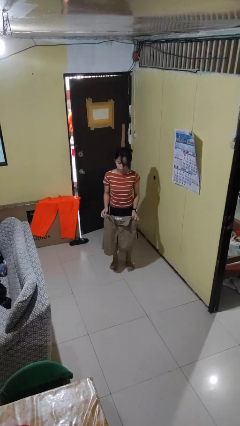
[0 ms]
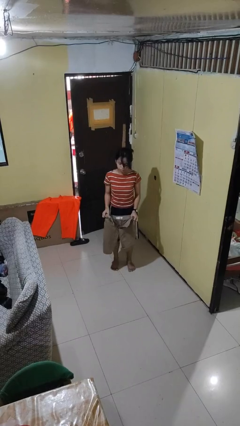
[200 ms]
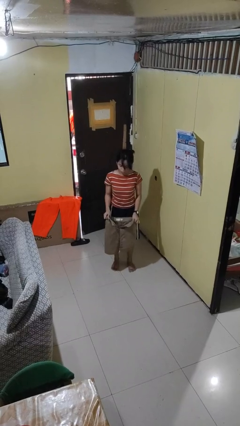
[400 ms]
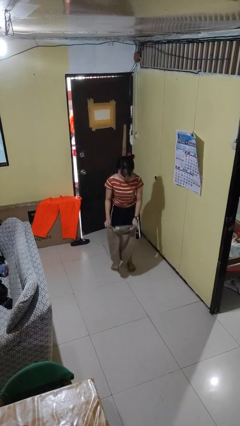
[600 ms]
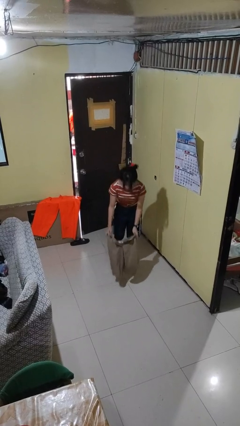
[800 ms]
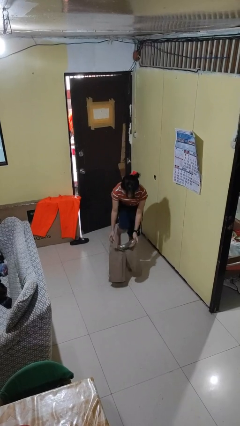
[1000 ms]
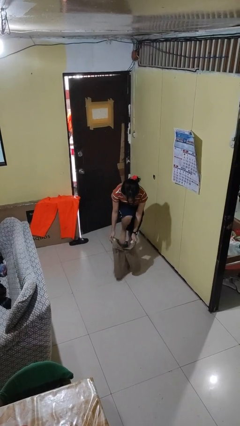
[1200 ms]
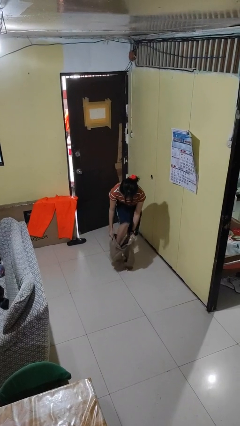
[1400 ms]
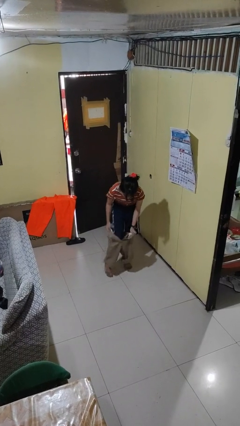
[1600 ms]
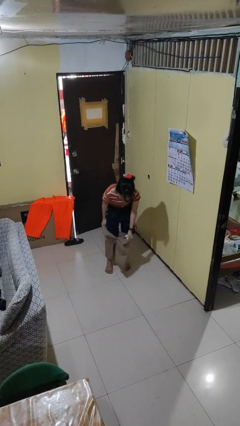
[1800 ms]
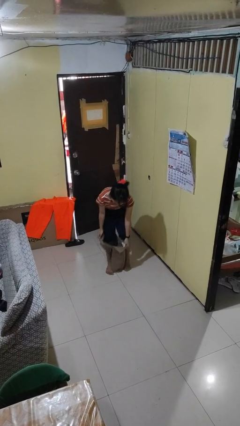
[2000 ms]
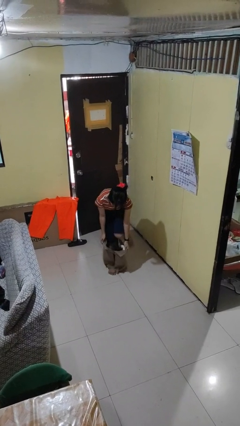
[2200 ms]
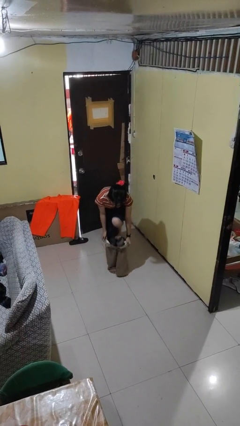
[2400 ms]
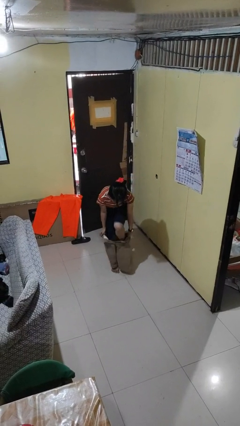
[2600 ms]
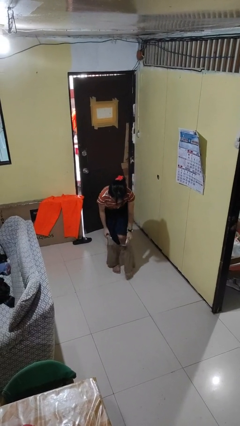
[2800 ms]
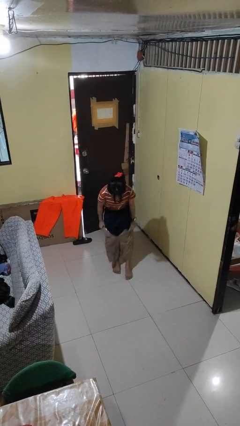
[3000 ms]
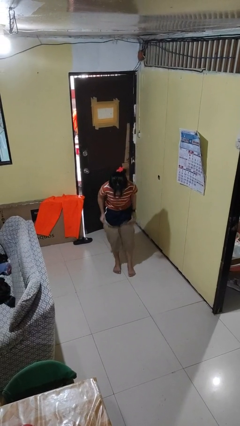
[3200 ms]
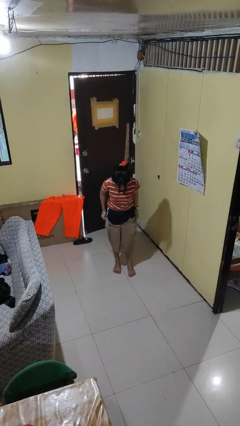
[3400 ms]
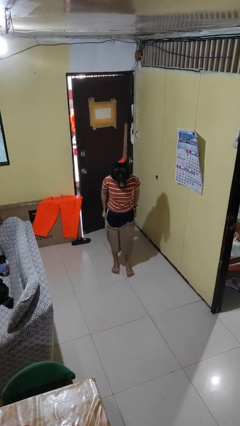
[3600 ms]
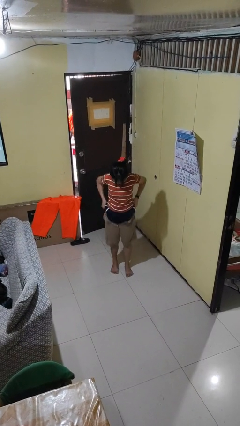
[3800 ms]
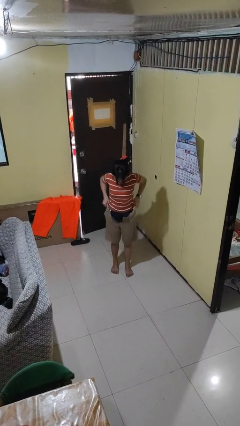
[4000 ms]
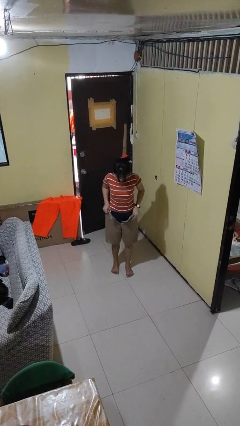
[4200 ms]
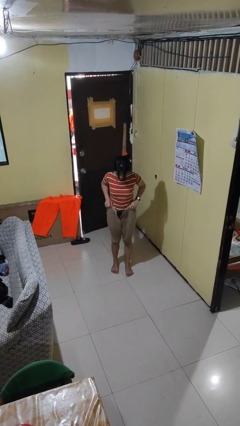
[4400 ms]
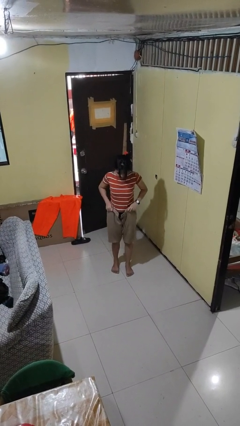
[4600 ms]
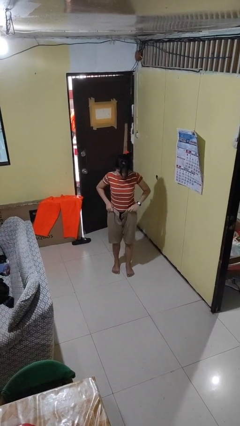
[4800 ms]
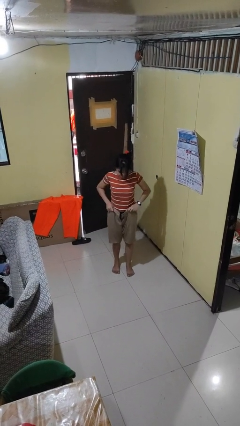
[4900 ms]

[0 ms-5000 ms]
person puts on pants

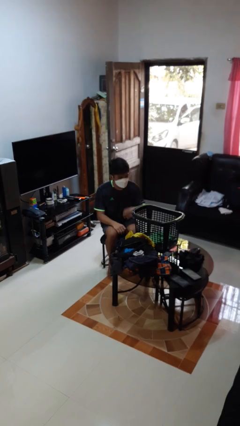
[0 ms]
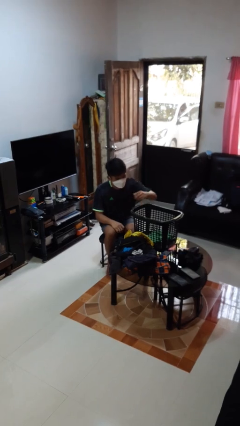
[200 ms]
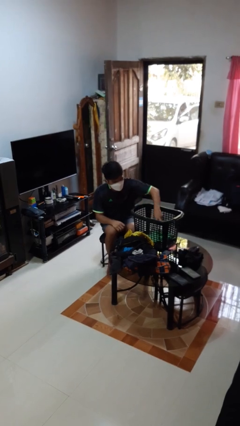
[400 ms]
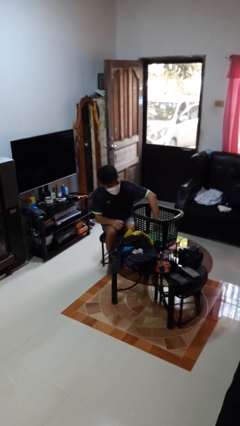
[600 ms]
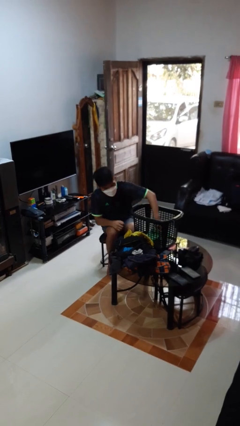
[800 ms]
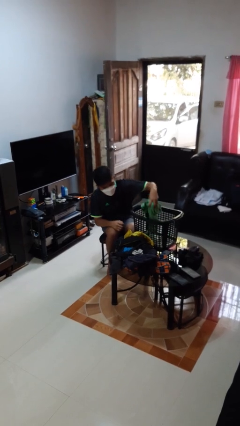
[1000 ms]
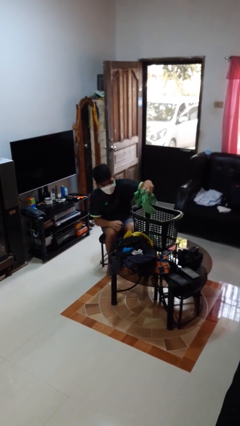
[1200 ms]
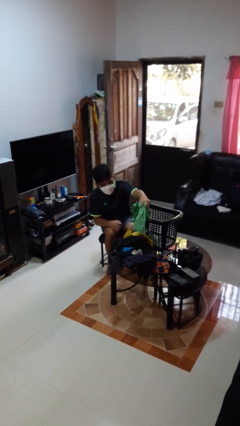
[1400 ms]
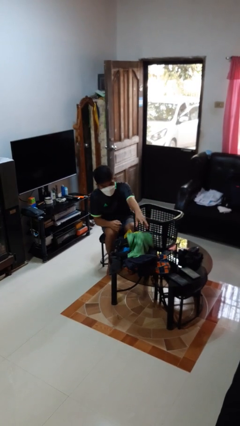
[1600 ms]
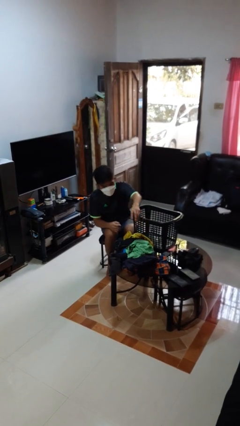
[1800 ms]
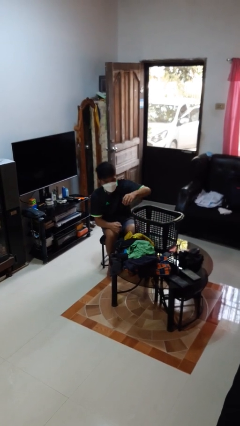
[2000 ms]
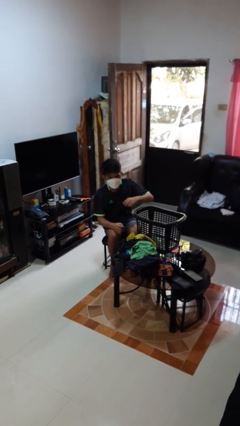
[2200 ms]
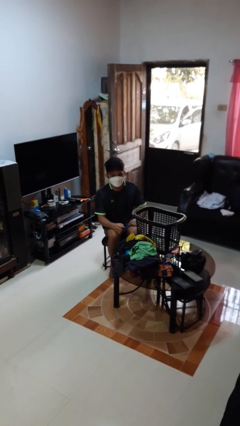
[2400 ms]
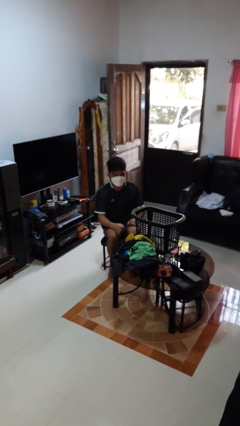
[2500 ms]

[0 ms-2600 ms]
person takes object from basket

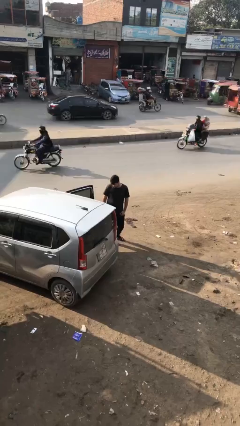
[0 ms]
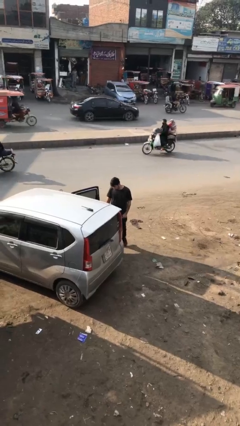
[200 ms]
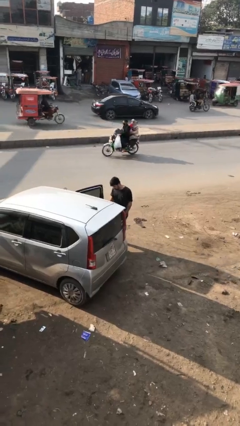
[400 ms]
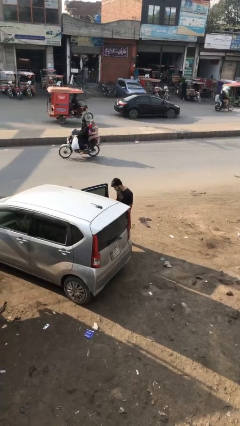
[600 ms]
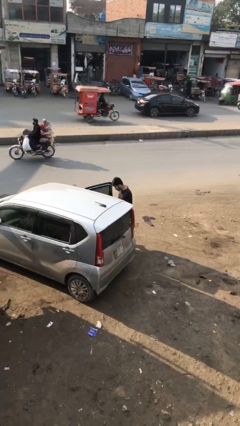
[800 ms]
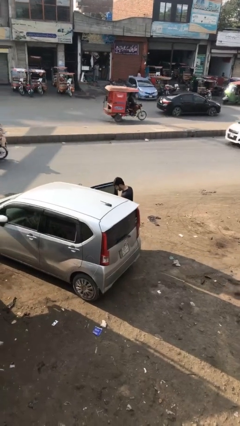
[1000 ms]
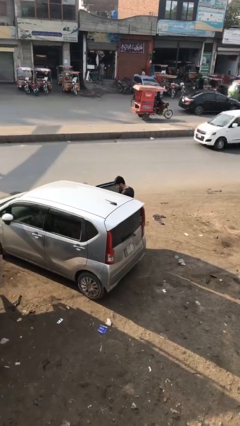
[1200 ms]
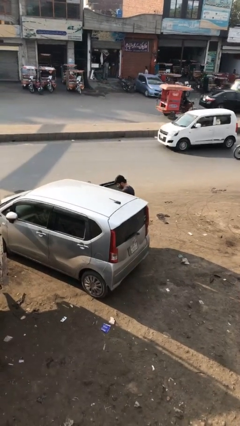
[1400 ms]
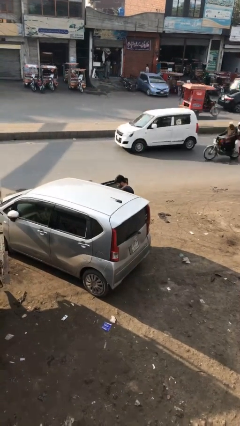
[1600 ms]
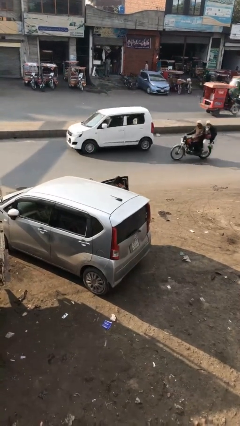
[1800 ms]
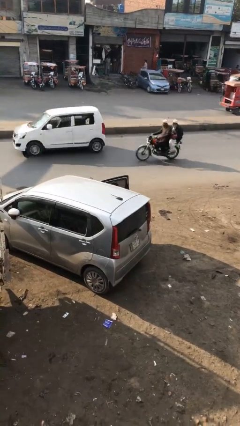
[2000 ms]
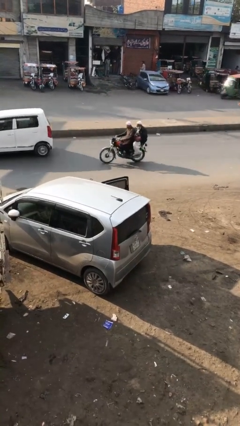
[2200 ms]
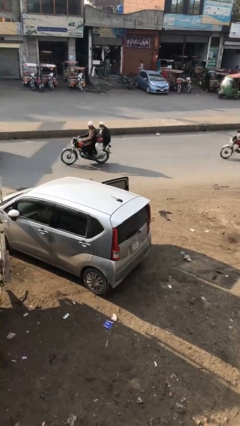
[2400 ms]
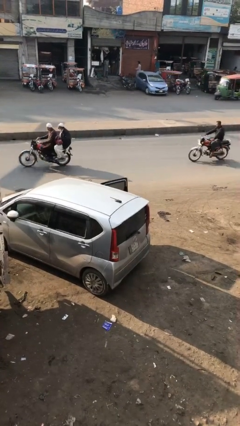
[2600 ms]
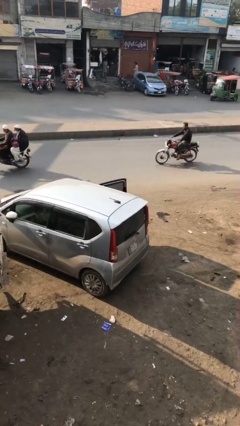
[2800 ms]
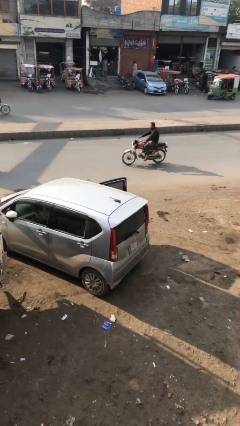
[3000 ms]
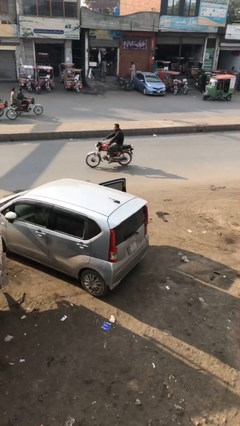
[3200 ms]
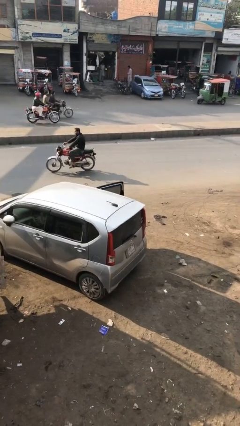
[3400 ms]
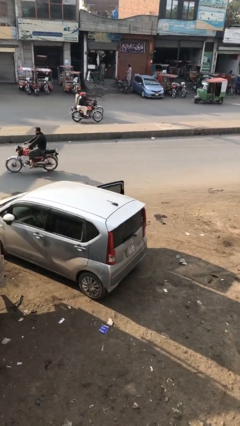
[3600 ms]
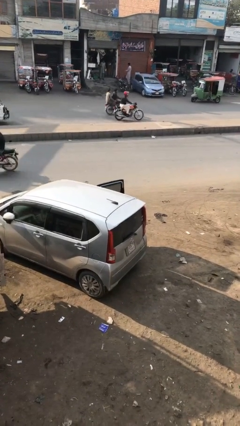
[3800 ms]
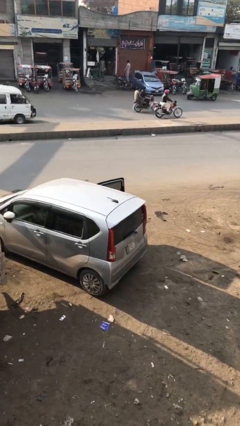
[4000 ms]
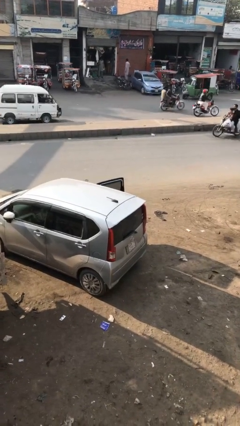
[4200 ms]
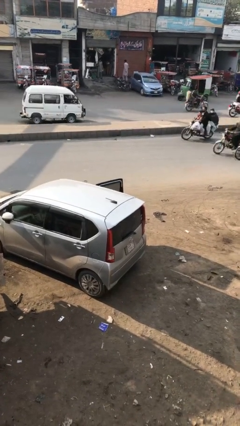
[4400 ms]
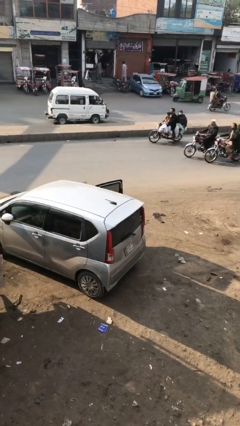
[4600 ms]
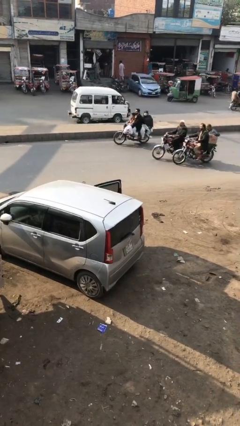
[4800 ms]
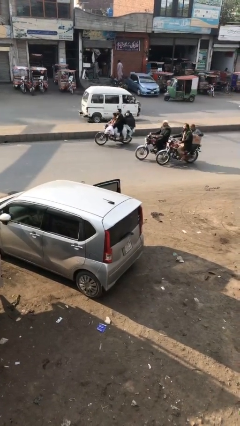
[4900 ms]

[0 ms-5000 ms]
person enters car

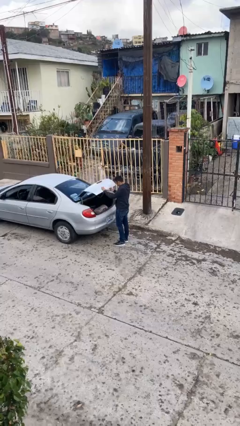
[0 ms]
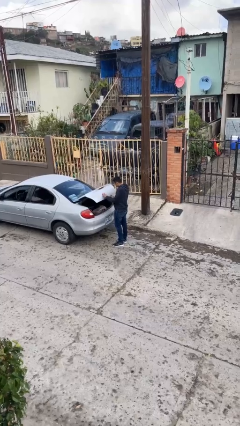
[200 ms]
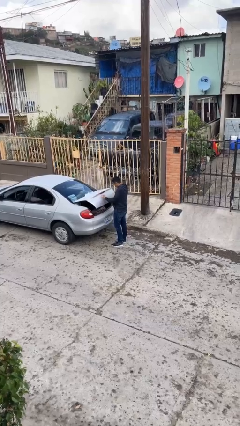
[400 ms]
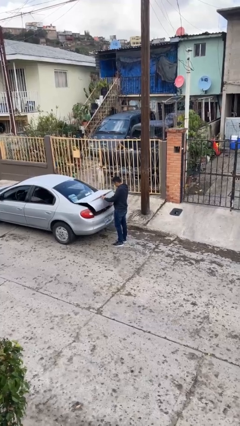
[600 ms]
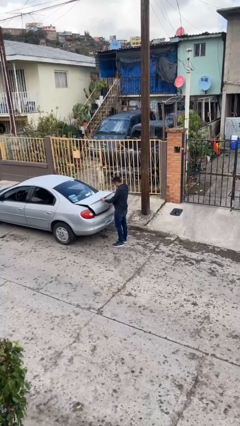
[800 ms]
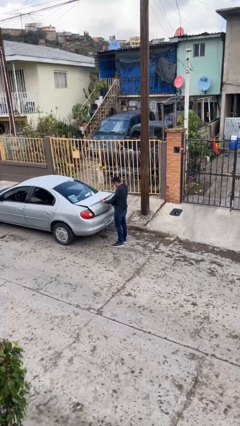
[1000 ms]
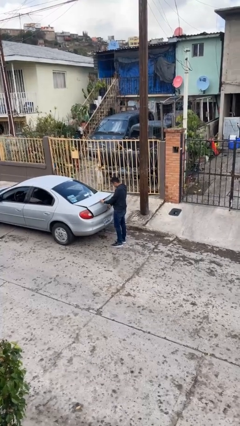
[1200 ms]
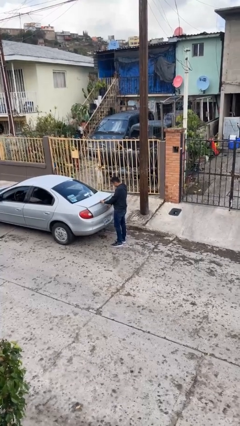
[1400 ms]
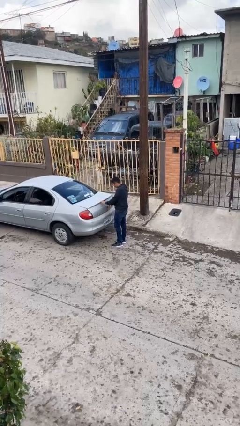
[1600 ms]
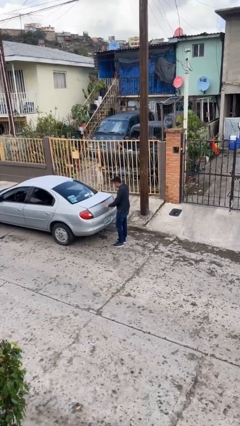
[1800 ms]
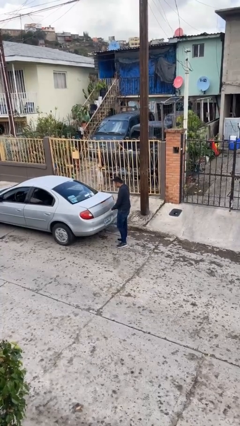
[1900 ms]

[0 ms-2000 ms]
person closes car trunk

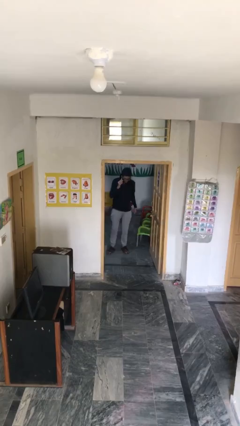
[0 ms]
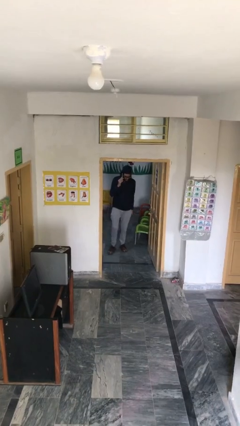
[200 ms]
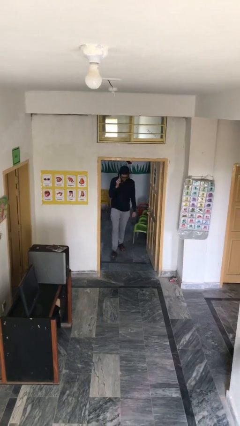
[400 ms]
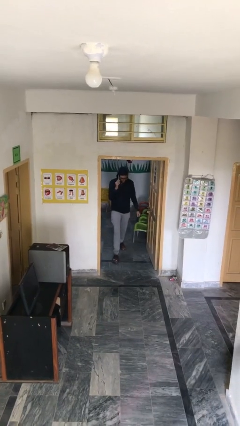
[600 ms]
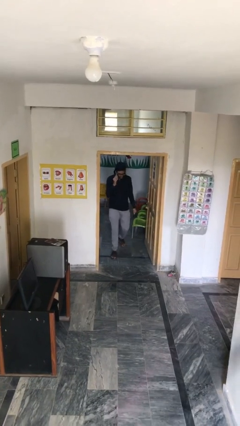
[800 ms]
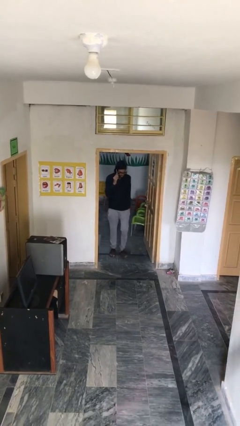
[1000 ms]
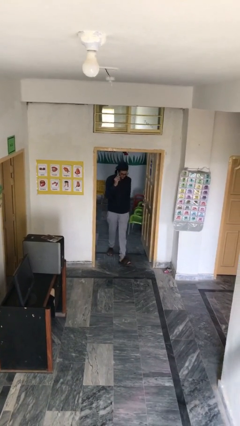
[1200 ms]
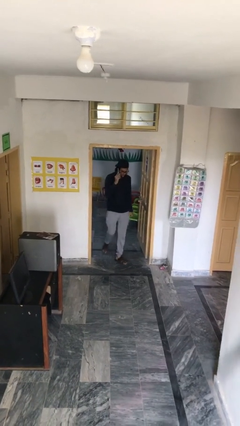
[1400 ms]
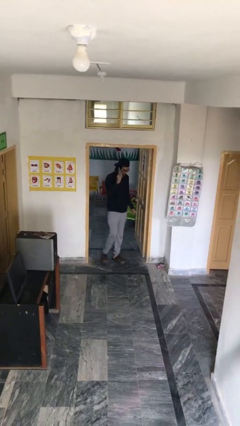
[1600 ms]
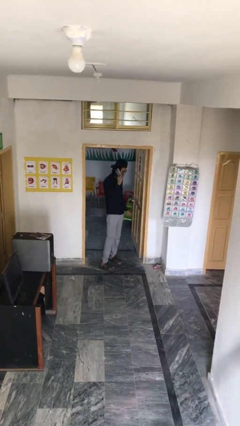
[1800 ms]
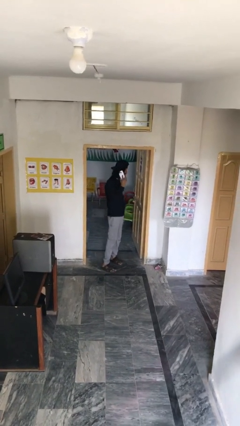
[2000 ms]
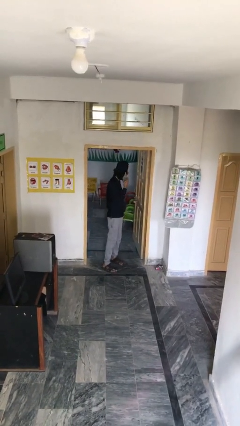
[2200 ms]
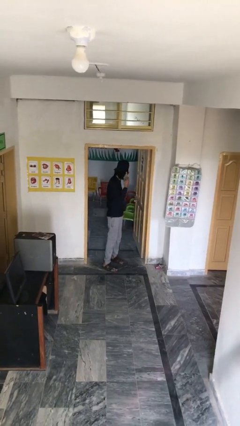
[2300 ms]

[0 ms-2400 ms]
person enters scene through structure

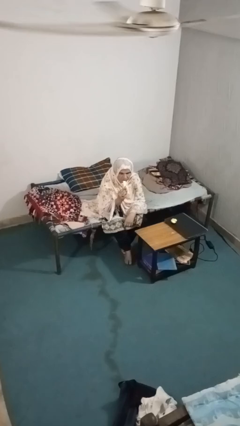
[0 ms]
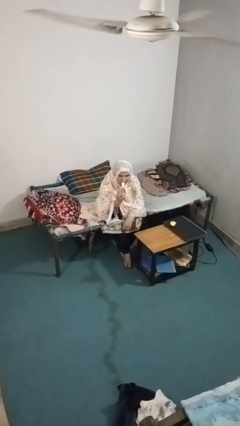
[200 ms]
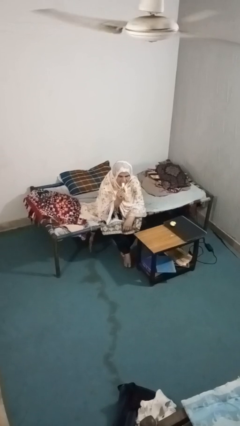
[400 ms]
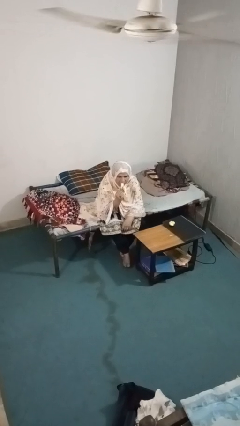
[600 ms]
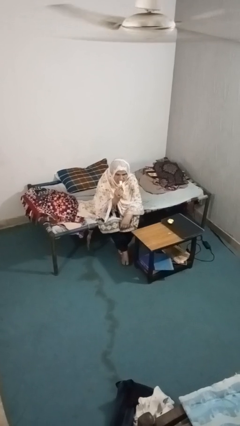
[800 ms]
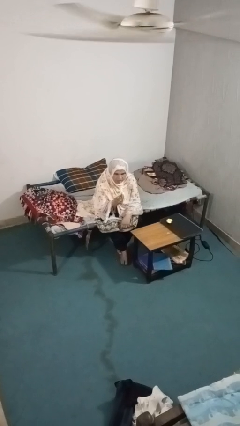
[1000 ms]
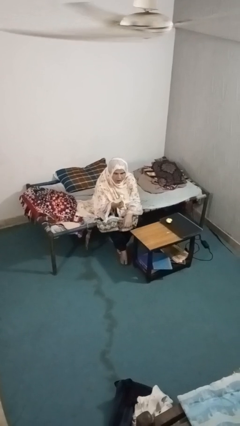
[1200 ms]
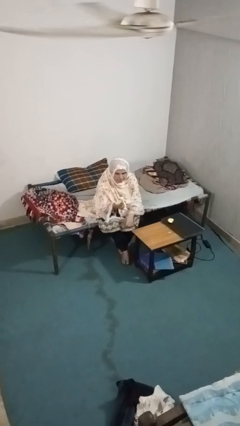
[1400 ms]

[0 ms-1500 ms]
person eats banana
